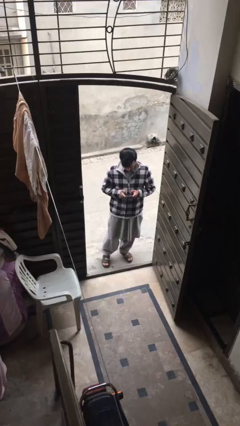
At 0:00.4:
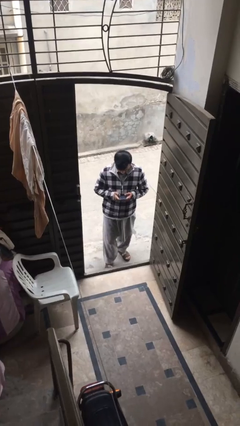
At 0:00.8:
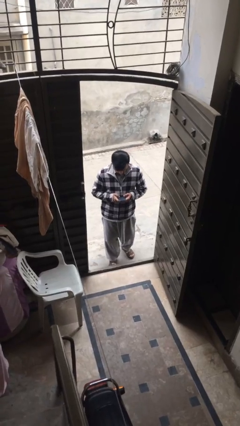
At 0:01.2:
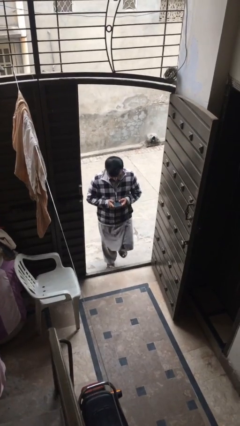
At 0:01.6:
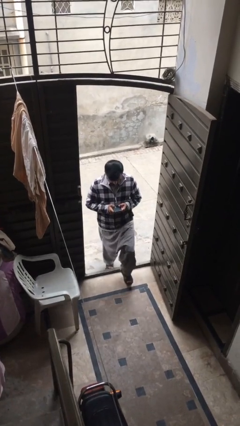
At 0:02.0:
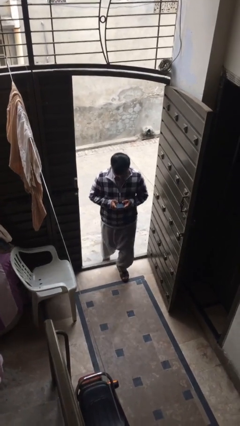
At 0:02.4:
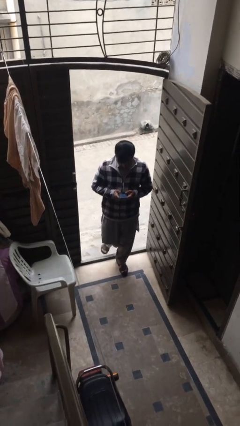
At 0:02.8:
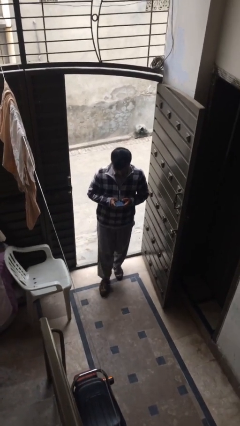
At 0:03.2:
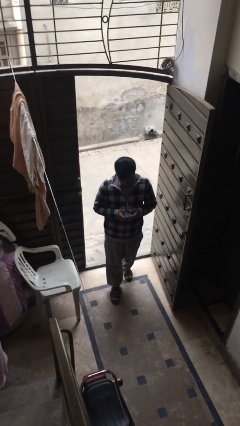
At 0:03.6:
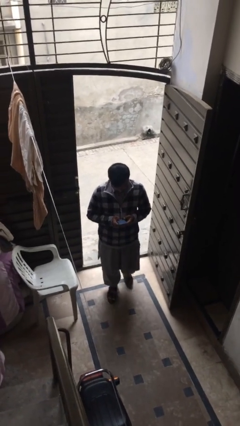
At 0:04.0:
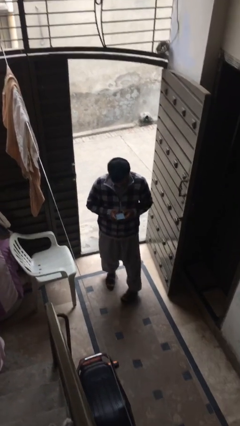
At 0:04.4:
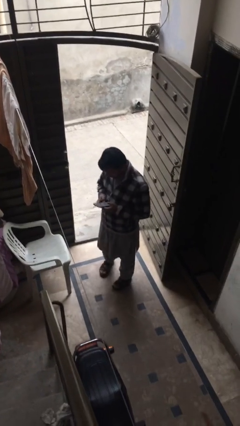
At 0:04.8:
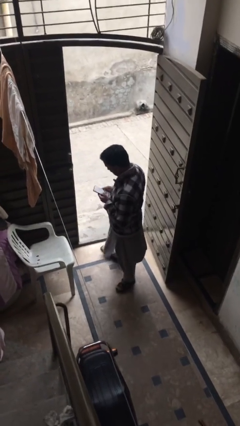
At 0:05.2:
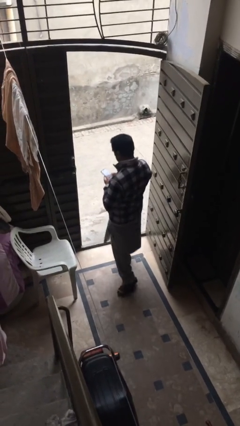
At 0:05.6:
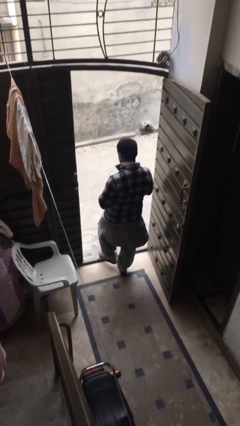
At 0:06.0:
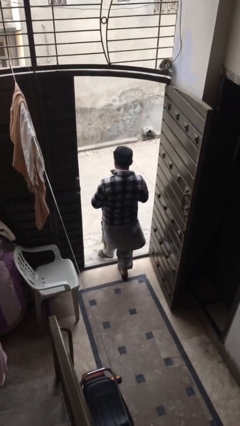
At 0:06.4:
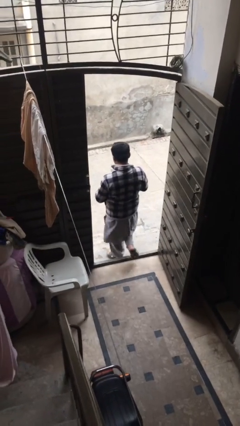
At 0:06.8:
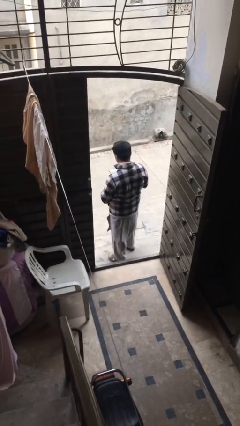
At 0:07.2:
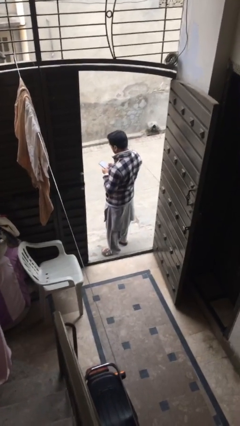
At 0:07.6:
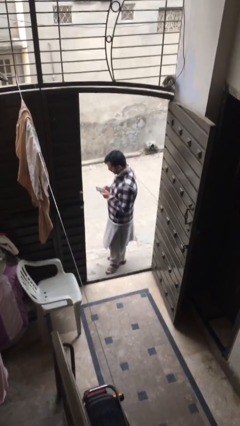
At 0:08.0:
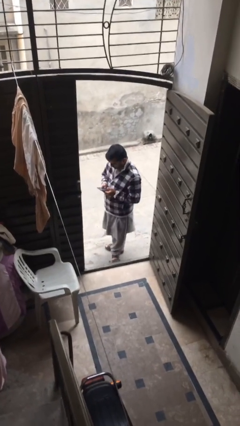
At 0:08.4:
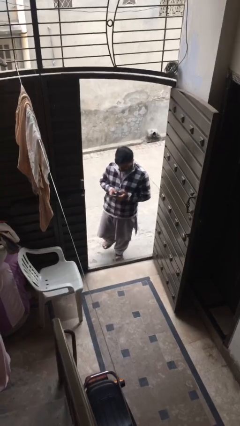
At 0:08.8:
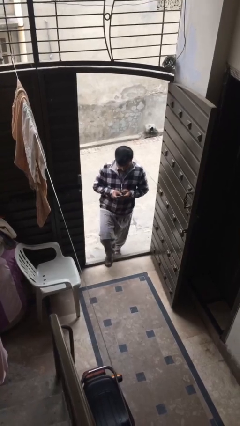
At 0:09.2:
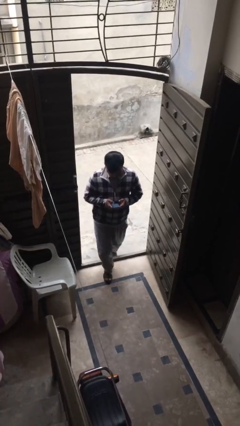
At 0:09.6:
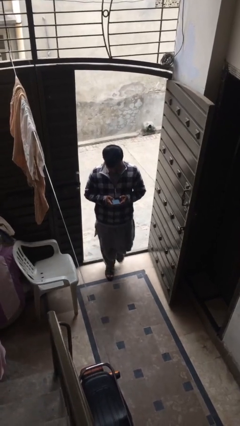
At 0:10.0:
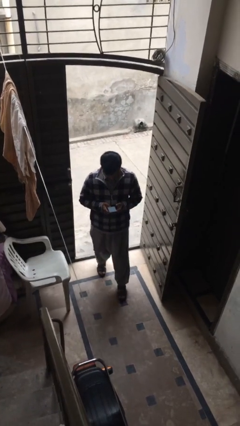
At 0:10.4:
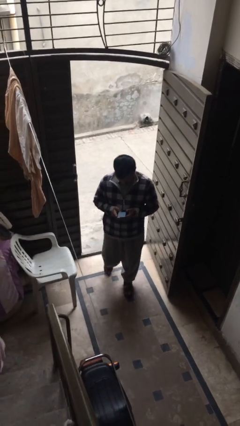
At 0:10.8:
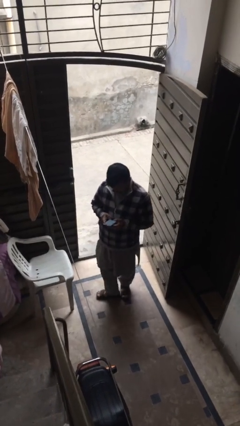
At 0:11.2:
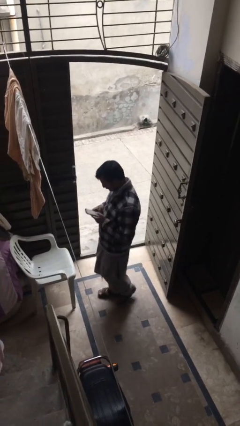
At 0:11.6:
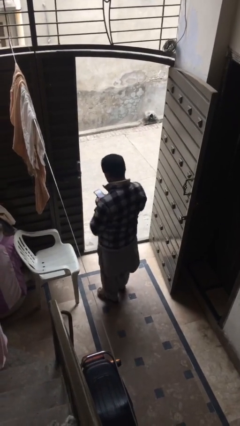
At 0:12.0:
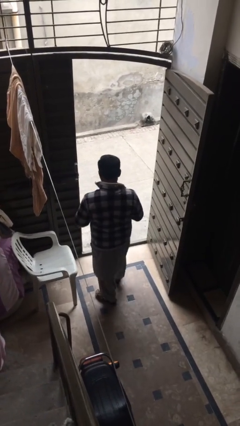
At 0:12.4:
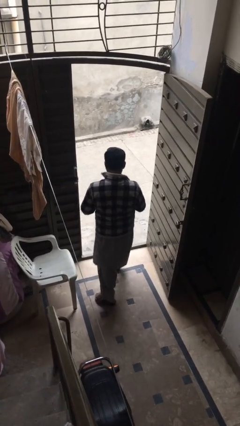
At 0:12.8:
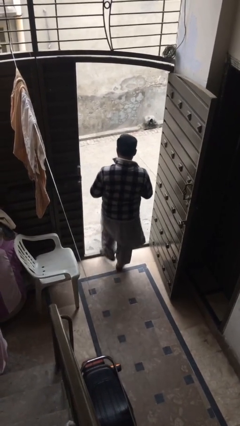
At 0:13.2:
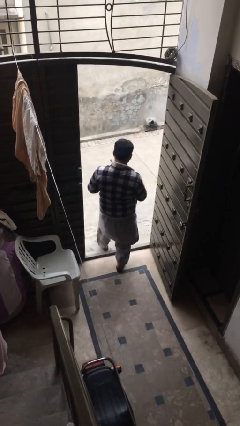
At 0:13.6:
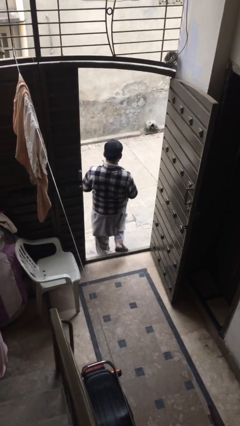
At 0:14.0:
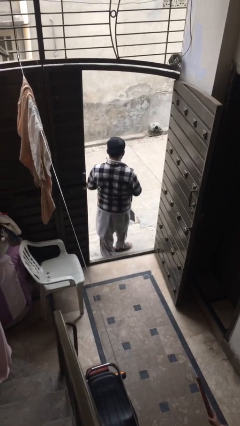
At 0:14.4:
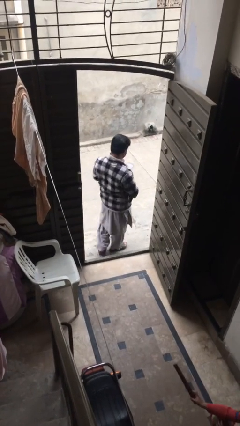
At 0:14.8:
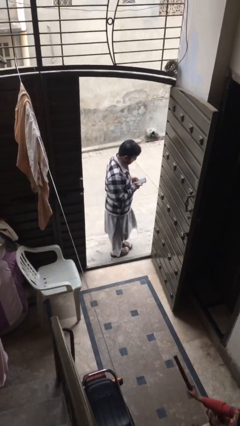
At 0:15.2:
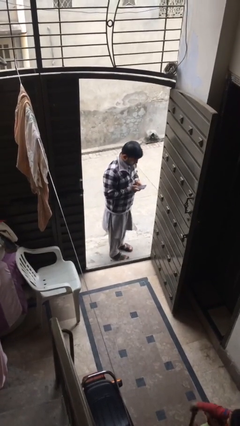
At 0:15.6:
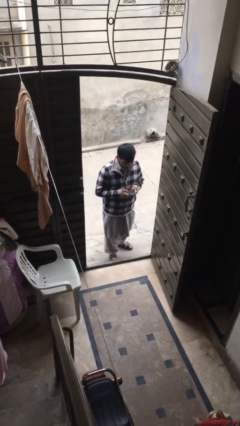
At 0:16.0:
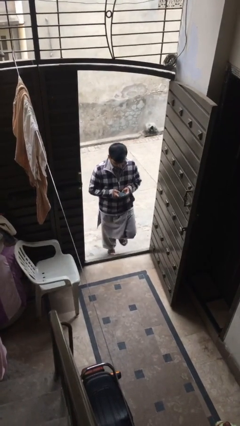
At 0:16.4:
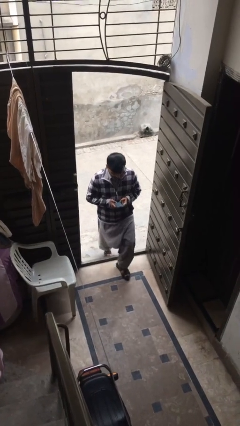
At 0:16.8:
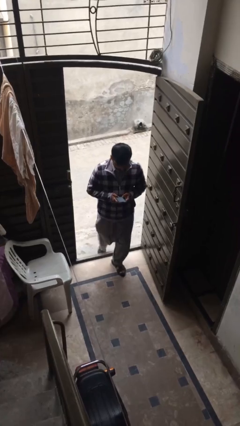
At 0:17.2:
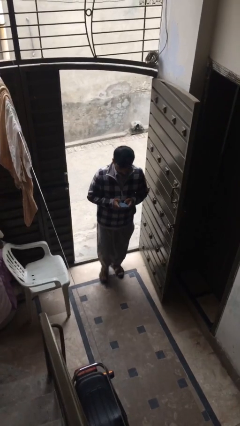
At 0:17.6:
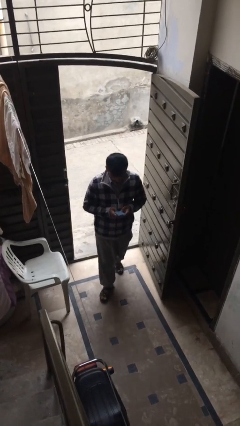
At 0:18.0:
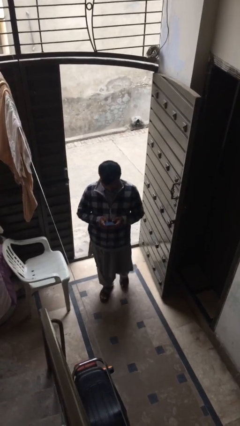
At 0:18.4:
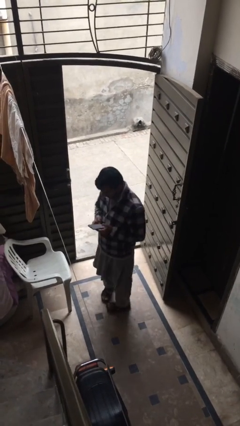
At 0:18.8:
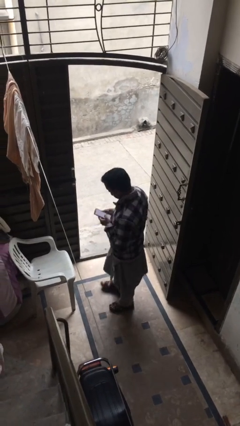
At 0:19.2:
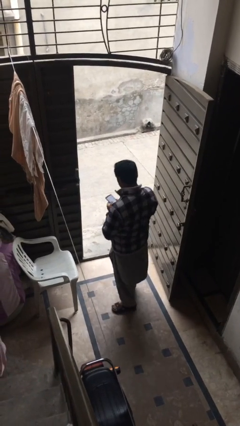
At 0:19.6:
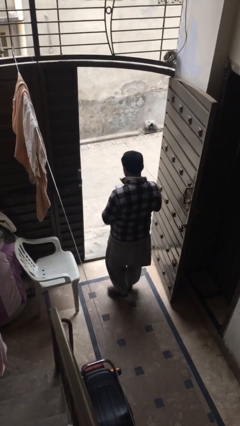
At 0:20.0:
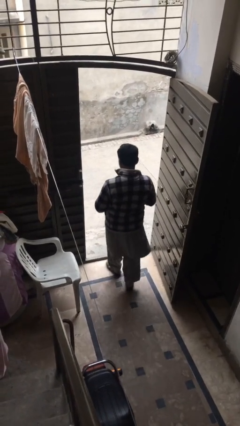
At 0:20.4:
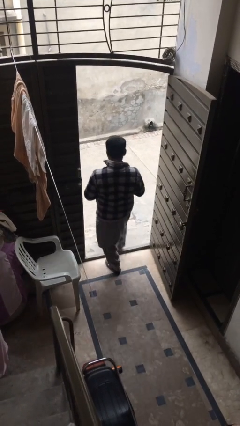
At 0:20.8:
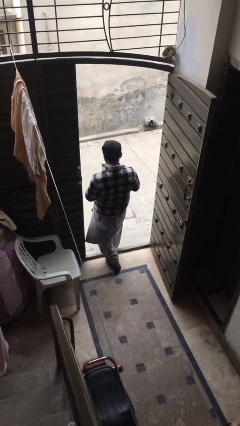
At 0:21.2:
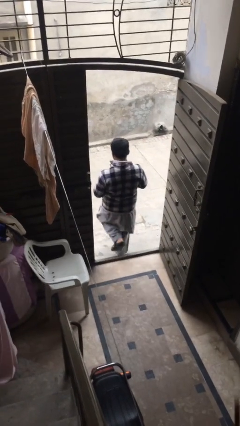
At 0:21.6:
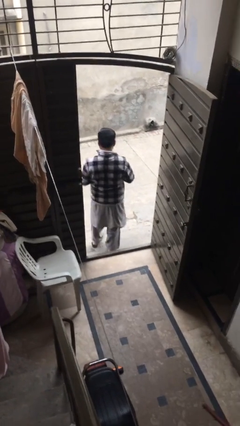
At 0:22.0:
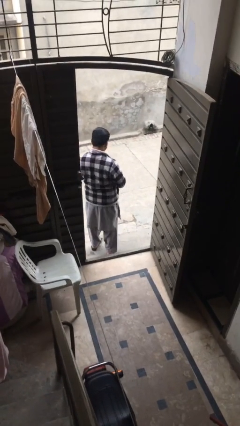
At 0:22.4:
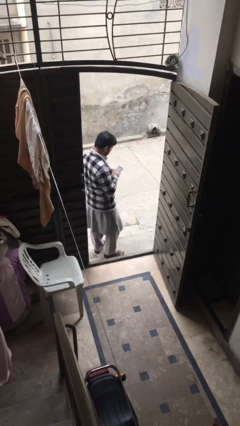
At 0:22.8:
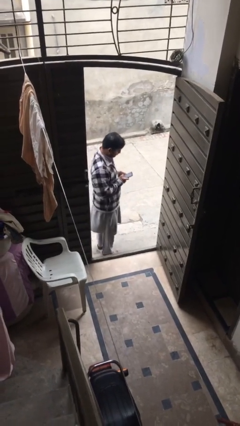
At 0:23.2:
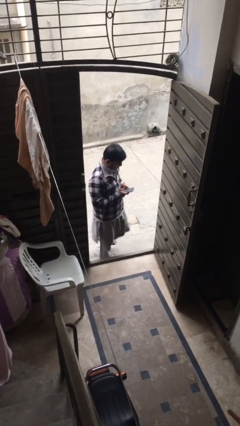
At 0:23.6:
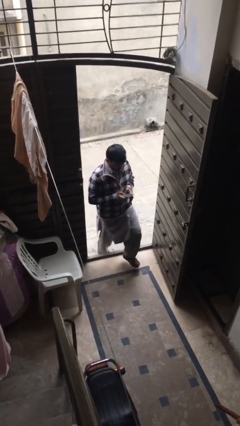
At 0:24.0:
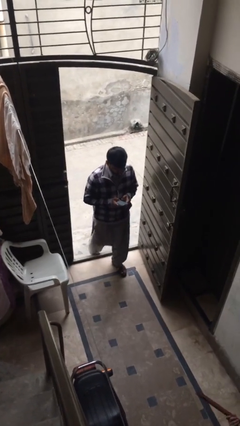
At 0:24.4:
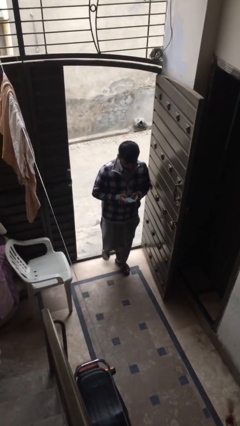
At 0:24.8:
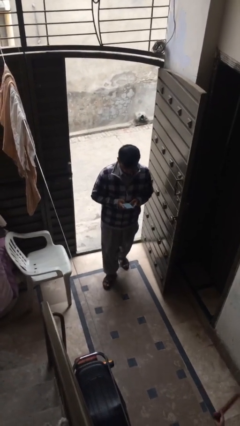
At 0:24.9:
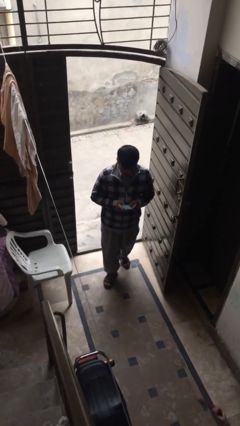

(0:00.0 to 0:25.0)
person texts on phone

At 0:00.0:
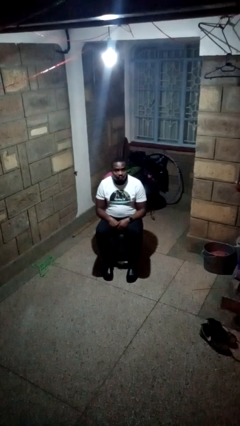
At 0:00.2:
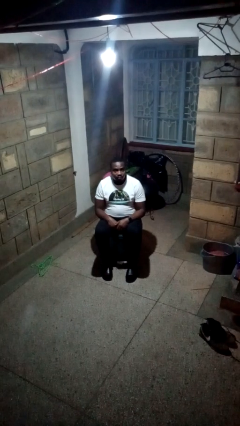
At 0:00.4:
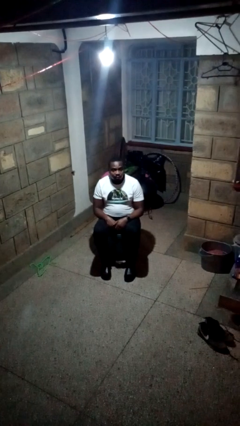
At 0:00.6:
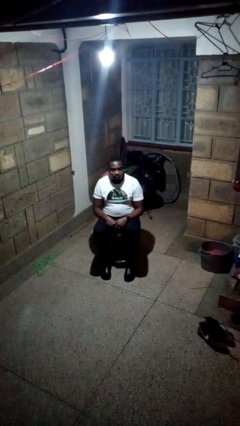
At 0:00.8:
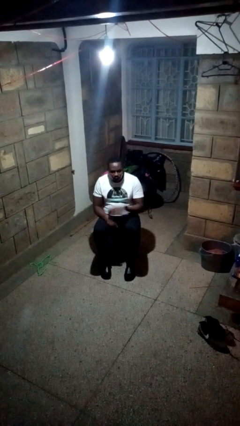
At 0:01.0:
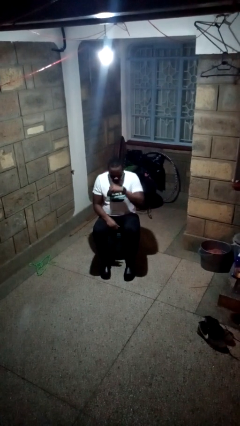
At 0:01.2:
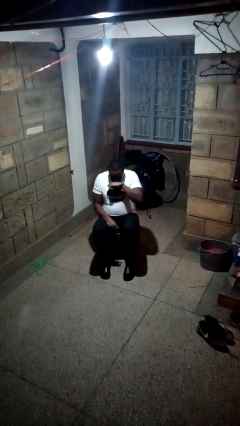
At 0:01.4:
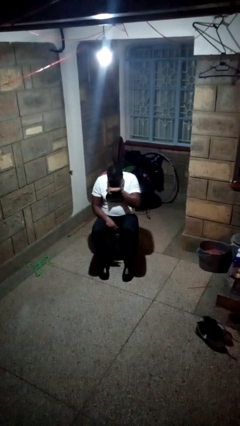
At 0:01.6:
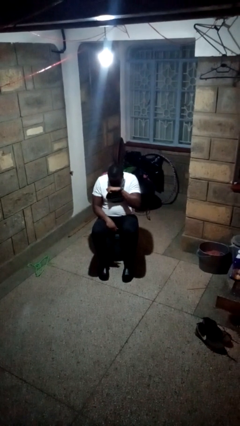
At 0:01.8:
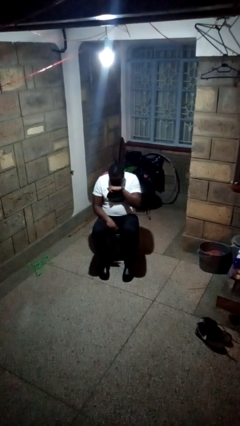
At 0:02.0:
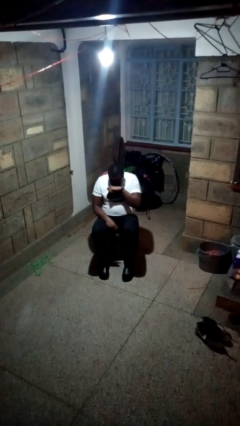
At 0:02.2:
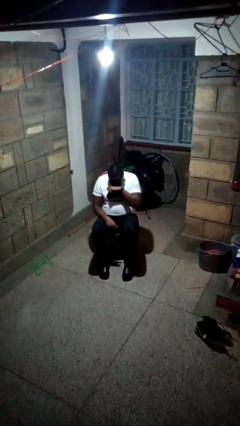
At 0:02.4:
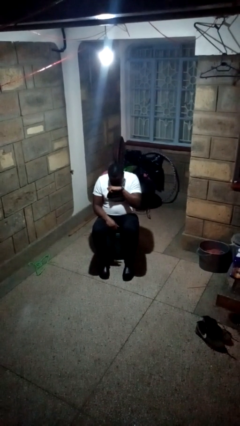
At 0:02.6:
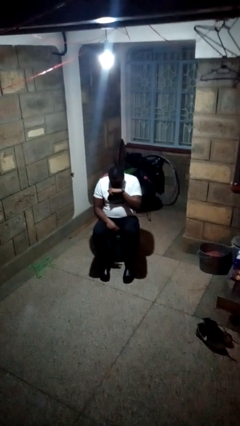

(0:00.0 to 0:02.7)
person sneezes into hand

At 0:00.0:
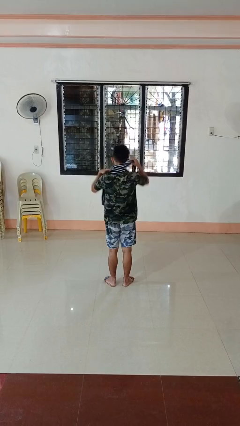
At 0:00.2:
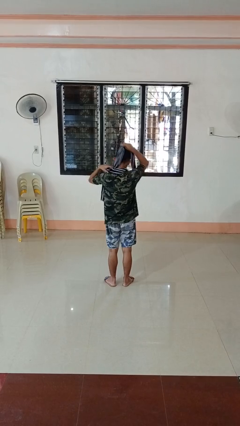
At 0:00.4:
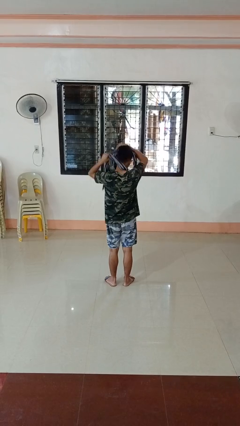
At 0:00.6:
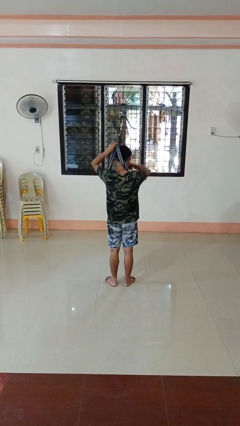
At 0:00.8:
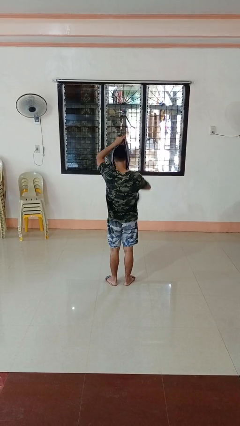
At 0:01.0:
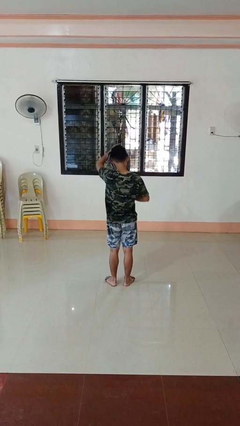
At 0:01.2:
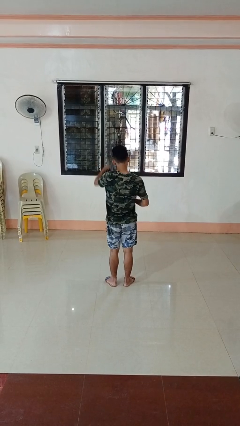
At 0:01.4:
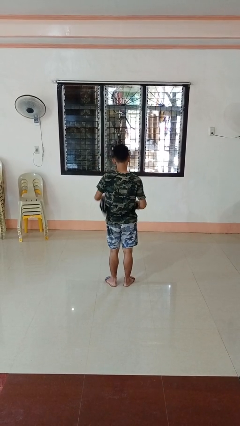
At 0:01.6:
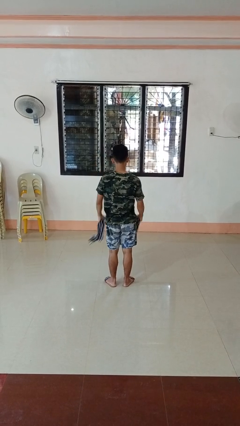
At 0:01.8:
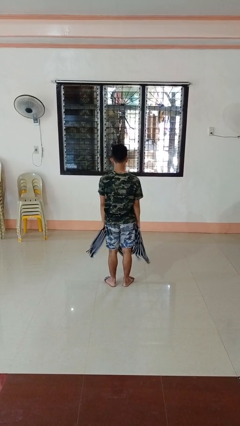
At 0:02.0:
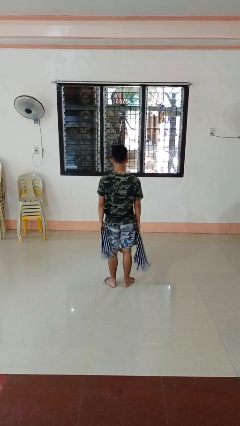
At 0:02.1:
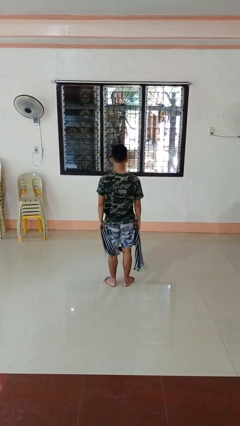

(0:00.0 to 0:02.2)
person takes off scarf

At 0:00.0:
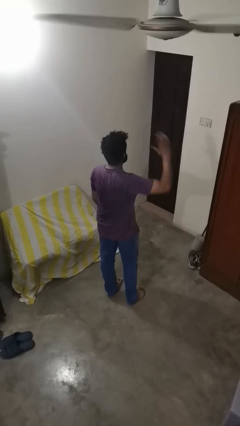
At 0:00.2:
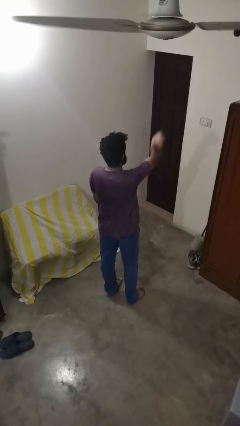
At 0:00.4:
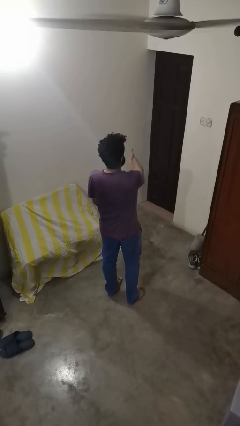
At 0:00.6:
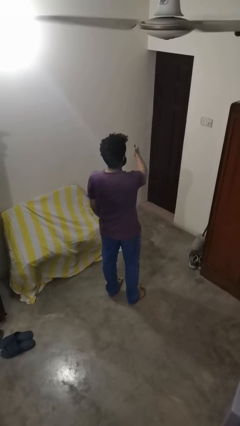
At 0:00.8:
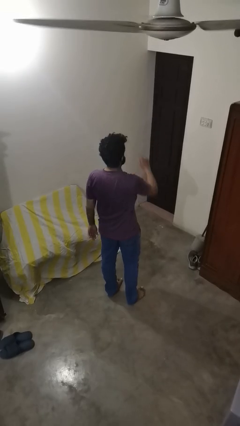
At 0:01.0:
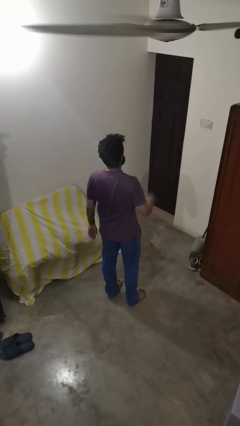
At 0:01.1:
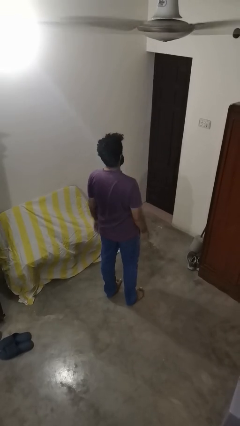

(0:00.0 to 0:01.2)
person karate chop
